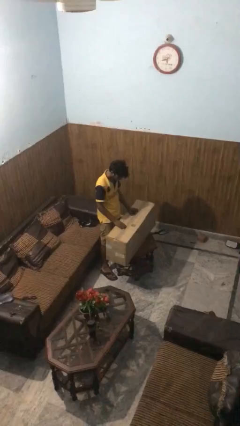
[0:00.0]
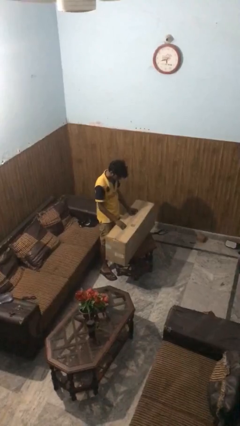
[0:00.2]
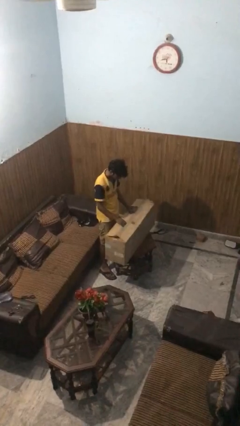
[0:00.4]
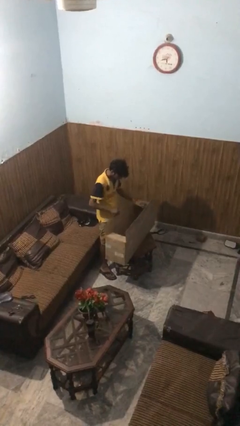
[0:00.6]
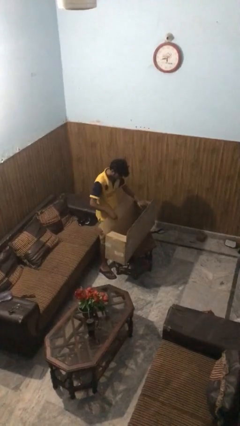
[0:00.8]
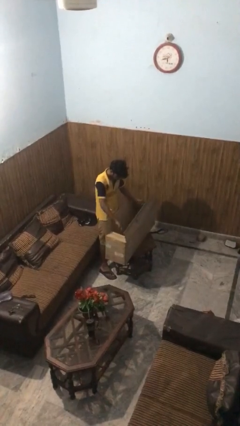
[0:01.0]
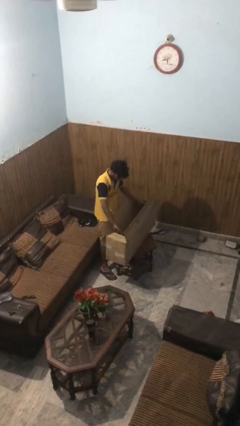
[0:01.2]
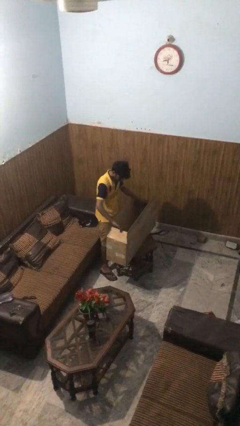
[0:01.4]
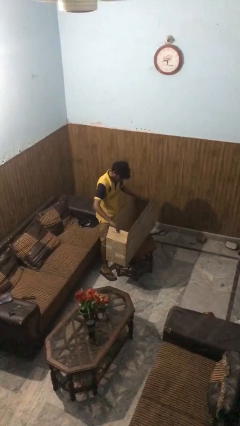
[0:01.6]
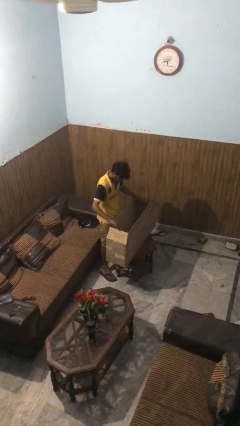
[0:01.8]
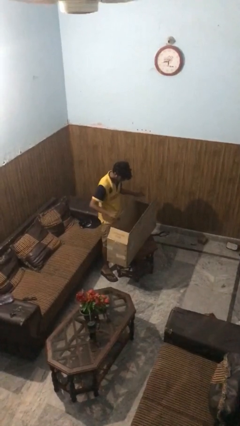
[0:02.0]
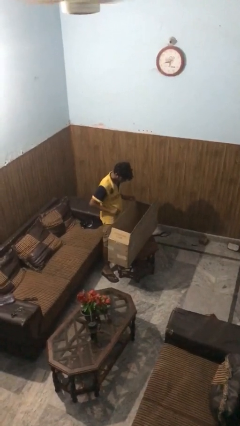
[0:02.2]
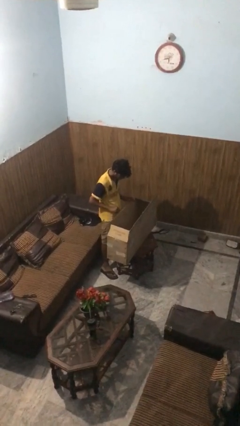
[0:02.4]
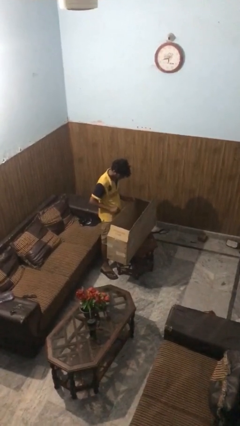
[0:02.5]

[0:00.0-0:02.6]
person opens box

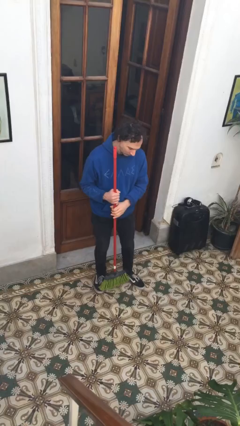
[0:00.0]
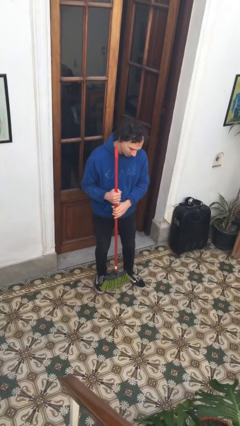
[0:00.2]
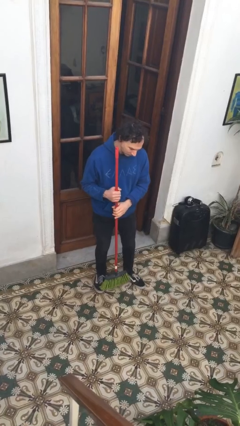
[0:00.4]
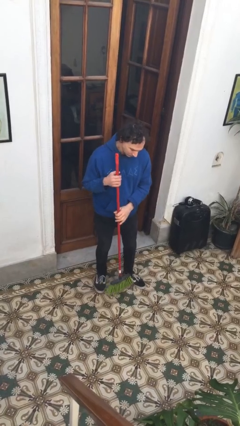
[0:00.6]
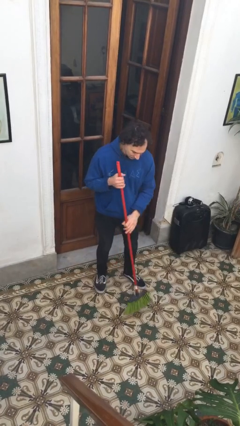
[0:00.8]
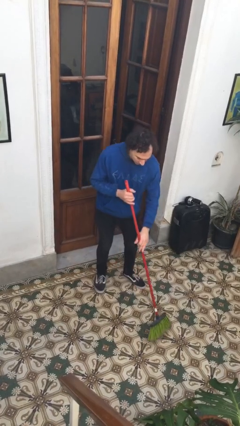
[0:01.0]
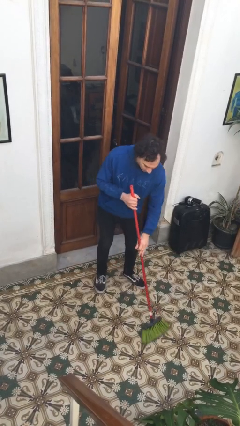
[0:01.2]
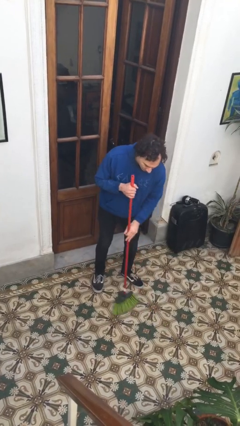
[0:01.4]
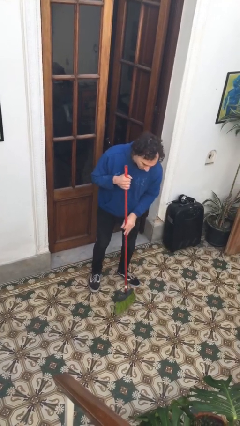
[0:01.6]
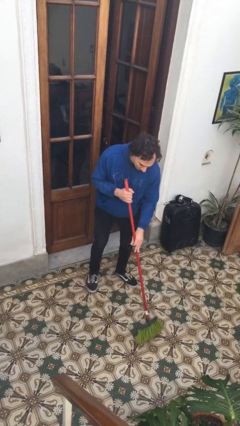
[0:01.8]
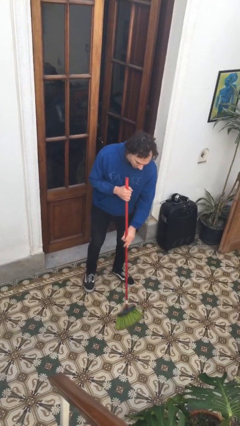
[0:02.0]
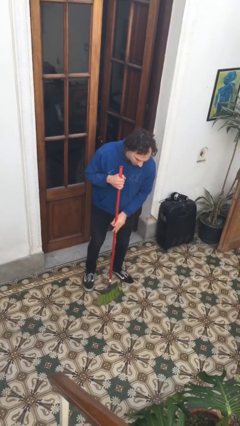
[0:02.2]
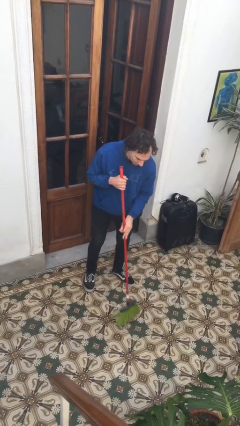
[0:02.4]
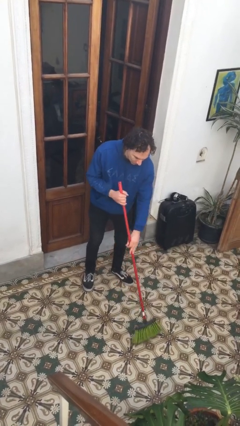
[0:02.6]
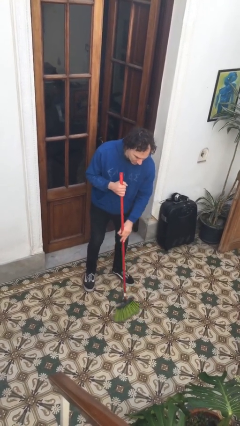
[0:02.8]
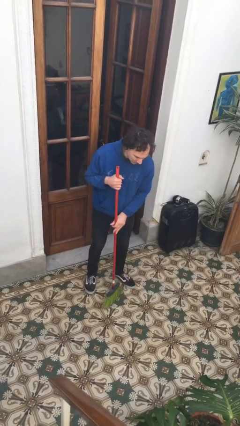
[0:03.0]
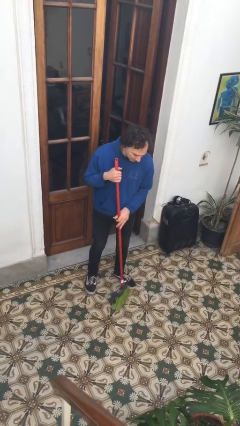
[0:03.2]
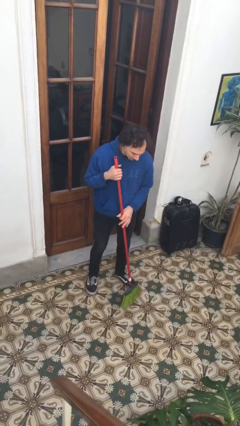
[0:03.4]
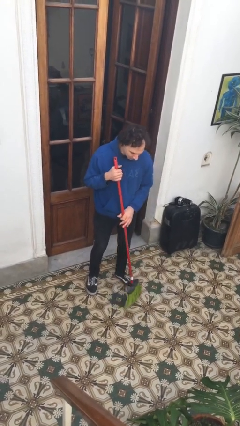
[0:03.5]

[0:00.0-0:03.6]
person sweeps floor

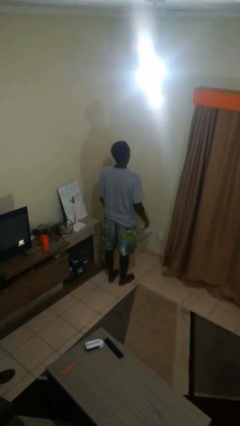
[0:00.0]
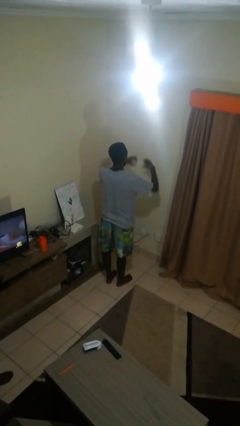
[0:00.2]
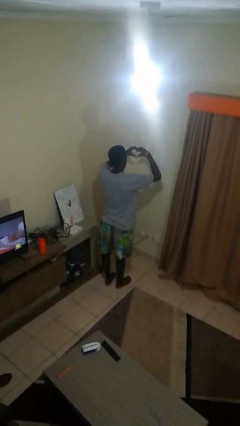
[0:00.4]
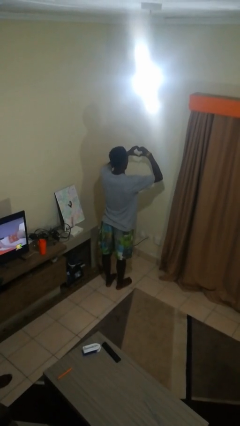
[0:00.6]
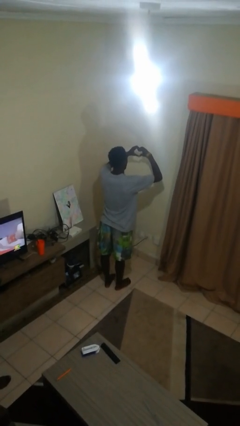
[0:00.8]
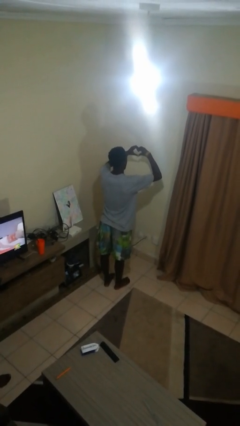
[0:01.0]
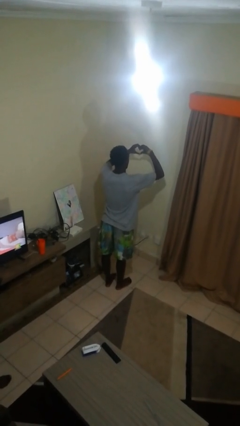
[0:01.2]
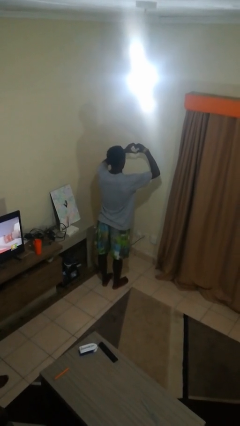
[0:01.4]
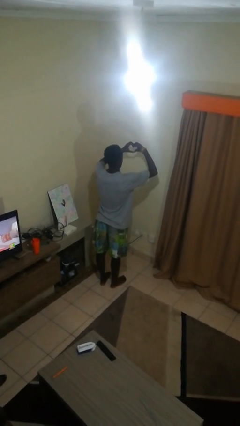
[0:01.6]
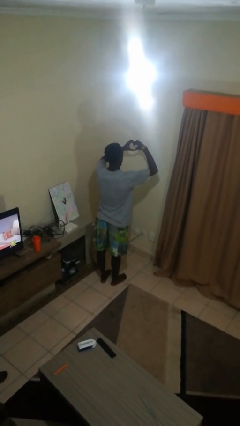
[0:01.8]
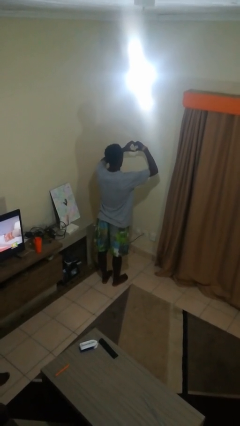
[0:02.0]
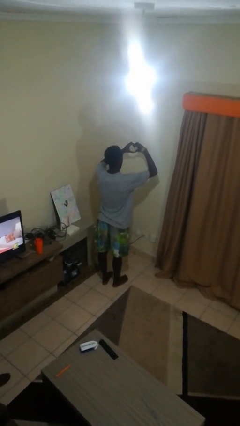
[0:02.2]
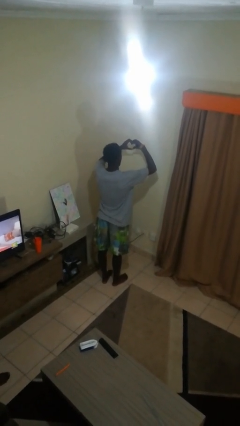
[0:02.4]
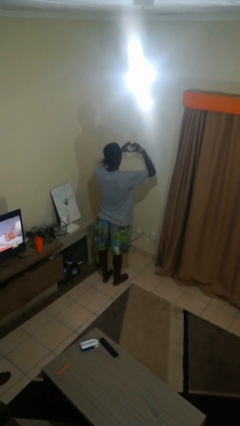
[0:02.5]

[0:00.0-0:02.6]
person gestures heart

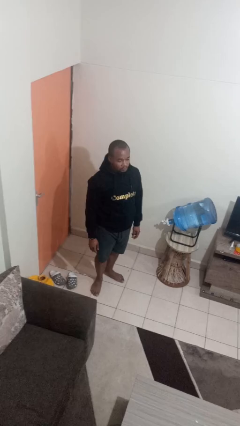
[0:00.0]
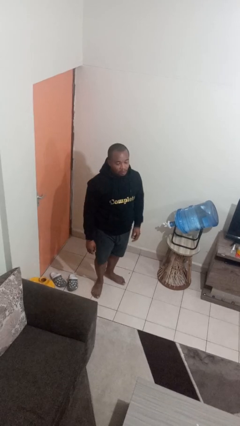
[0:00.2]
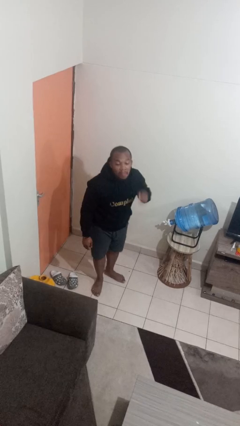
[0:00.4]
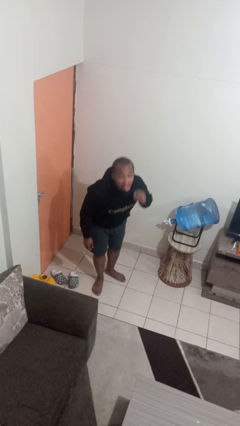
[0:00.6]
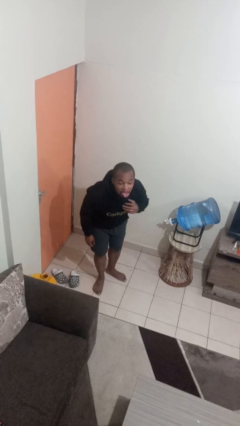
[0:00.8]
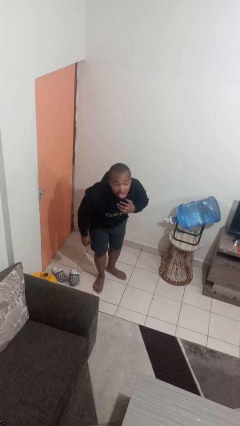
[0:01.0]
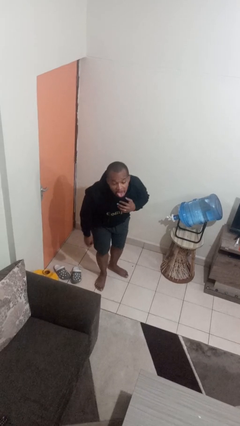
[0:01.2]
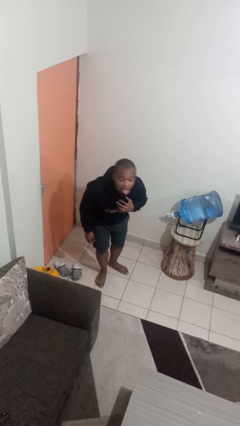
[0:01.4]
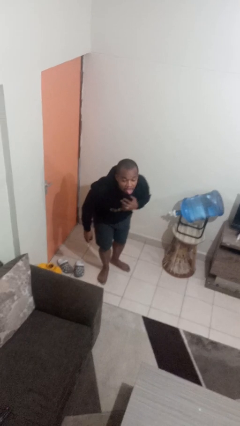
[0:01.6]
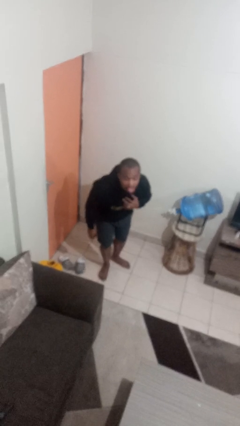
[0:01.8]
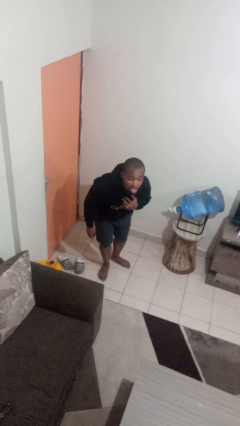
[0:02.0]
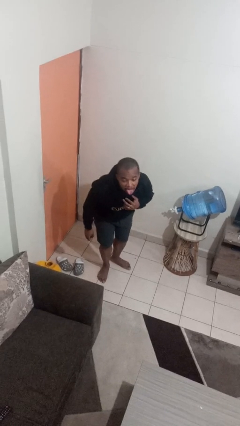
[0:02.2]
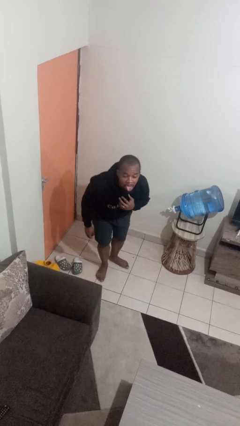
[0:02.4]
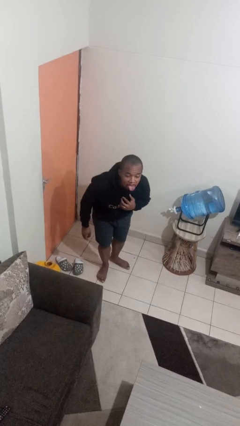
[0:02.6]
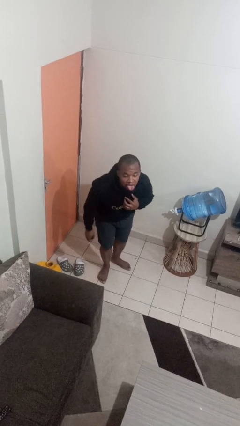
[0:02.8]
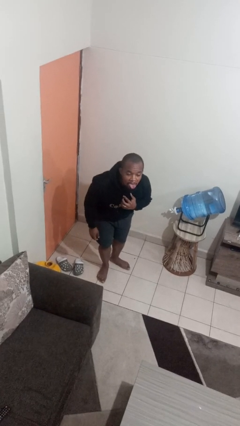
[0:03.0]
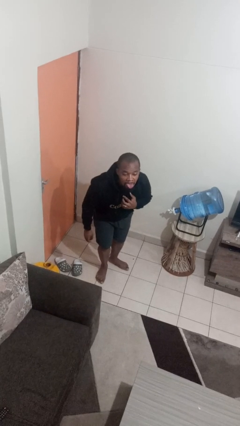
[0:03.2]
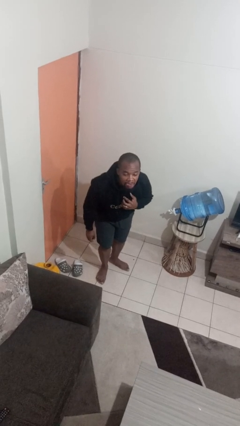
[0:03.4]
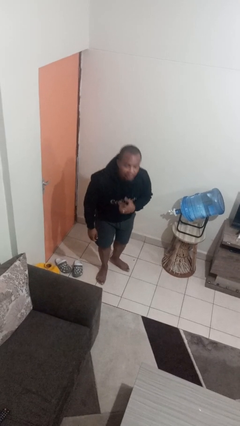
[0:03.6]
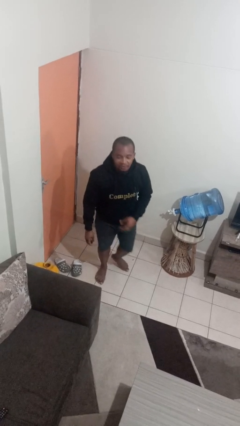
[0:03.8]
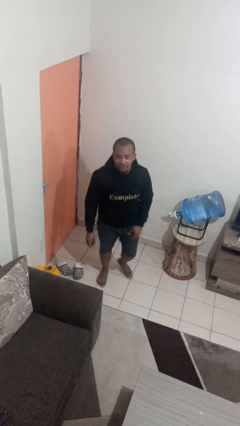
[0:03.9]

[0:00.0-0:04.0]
person sticks out tongue

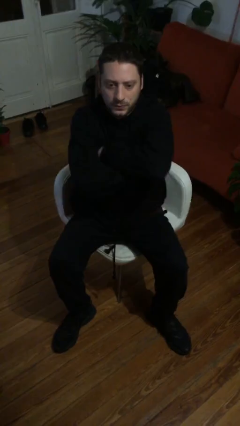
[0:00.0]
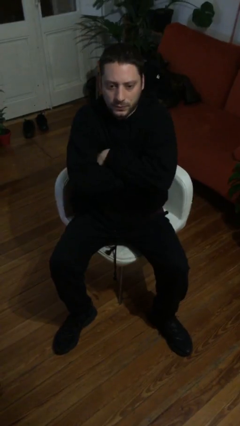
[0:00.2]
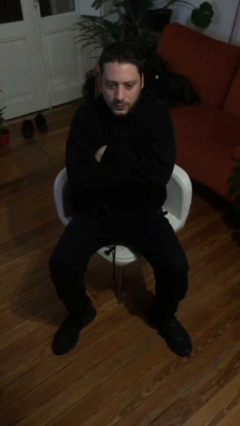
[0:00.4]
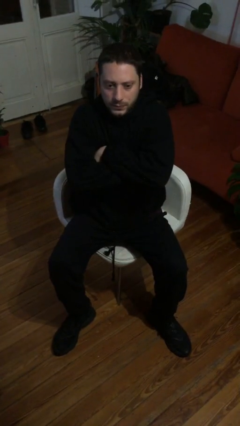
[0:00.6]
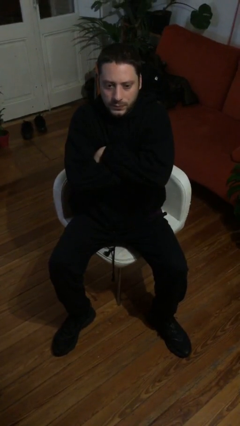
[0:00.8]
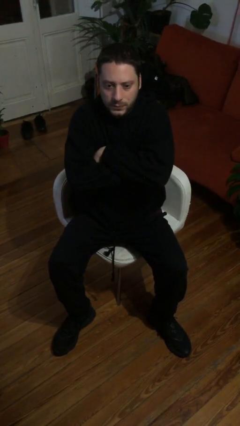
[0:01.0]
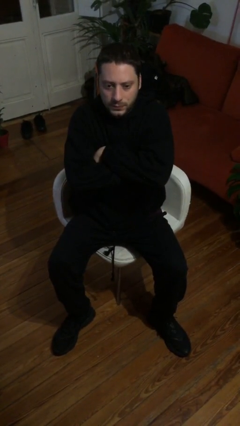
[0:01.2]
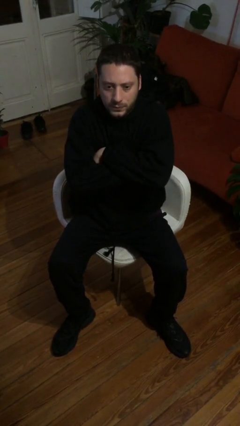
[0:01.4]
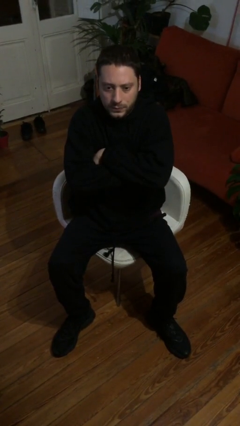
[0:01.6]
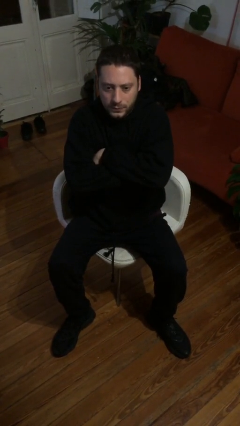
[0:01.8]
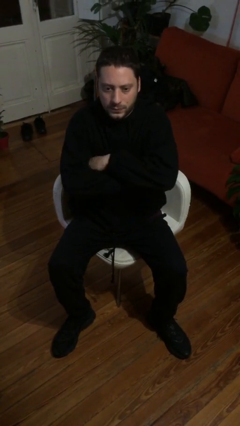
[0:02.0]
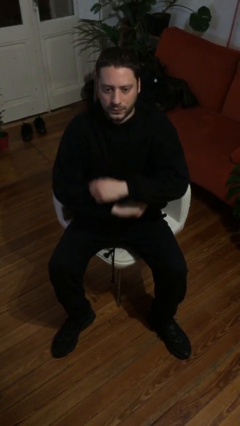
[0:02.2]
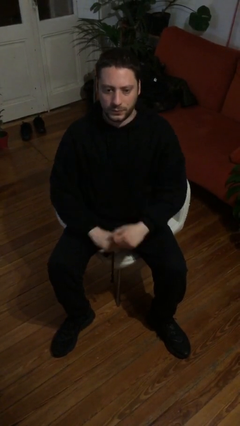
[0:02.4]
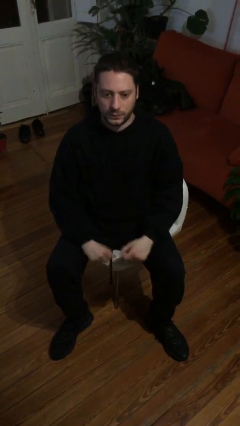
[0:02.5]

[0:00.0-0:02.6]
person crosses arms

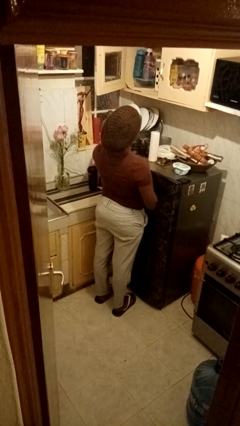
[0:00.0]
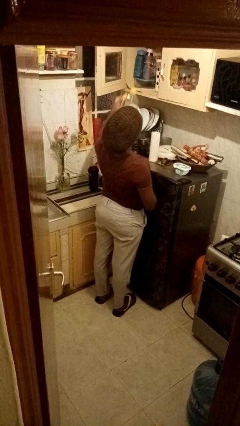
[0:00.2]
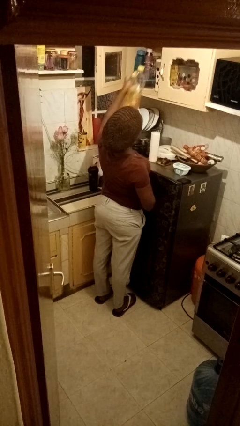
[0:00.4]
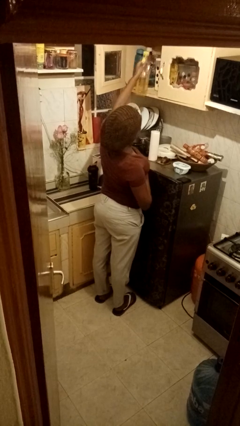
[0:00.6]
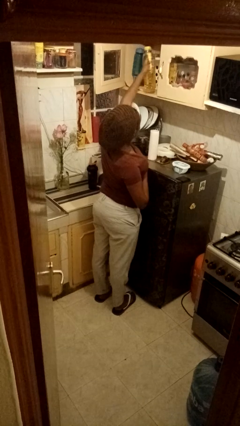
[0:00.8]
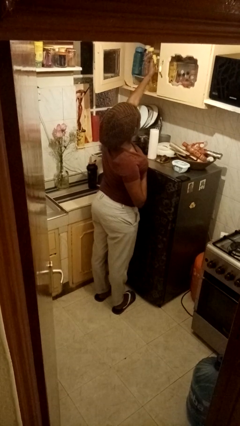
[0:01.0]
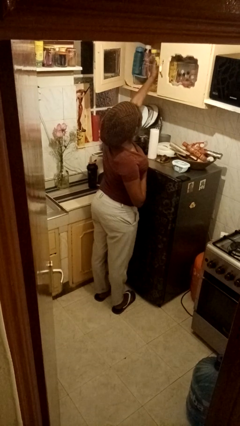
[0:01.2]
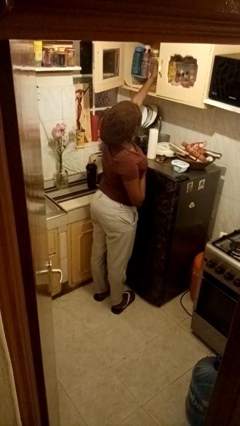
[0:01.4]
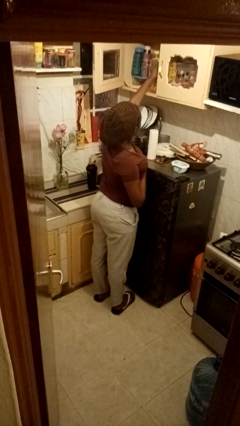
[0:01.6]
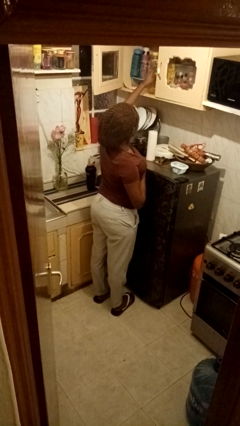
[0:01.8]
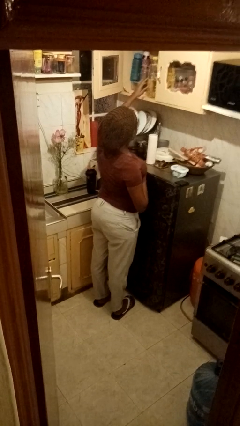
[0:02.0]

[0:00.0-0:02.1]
person puts down object on shelf
